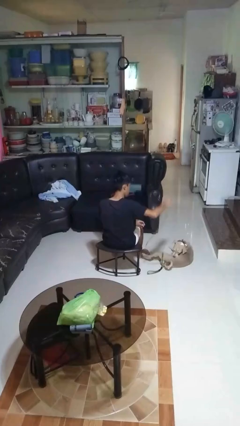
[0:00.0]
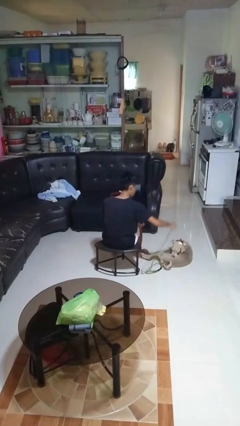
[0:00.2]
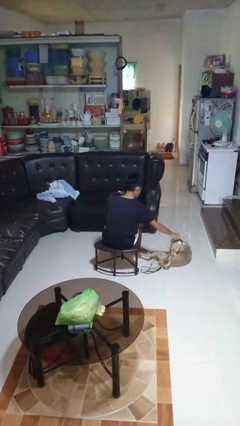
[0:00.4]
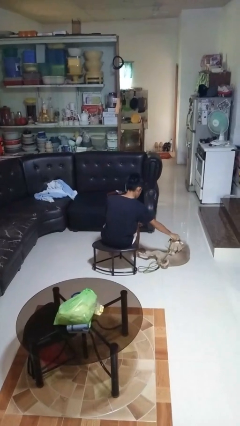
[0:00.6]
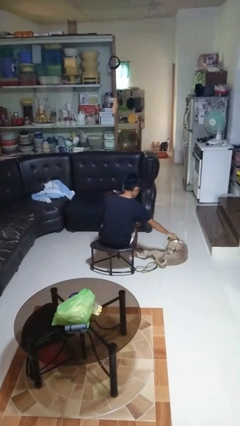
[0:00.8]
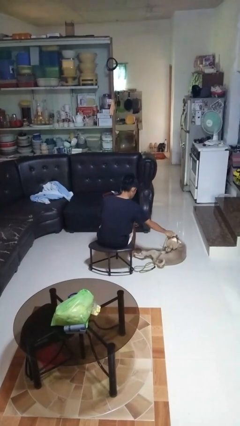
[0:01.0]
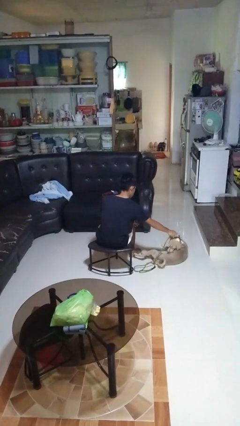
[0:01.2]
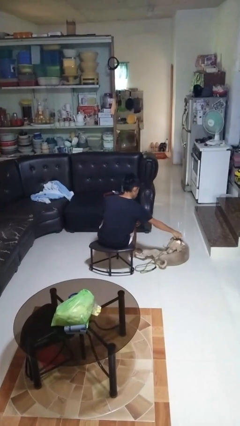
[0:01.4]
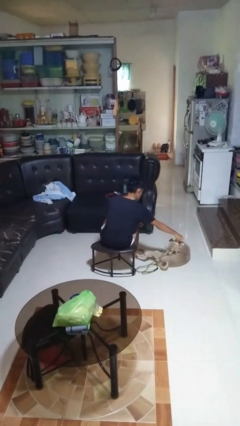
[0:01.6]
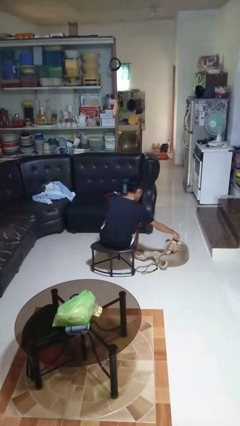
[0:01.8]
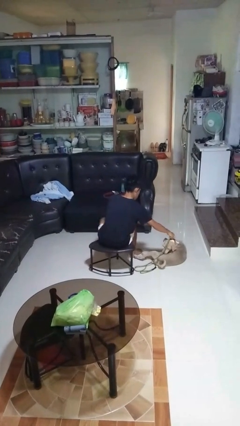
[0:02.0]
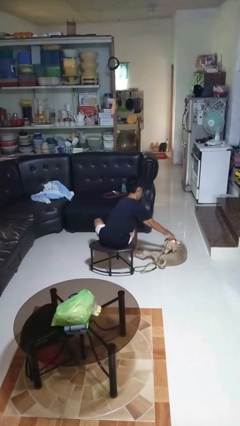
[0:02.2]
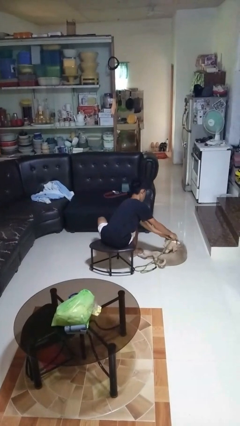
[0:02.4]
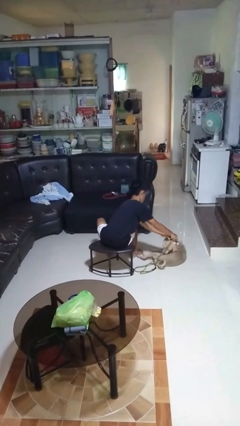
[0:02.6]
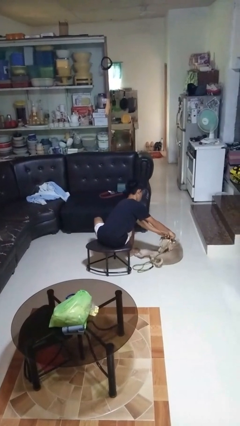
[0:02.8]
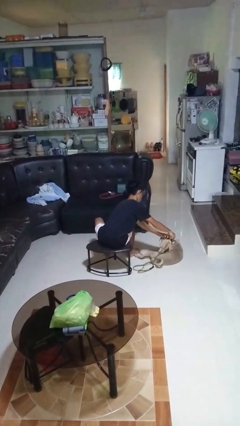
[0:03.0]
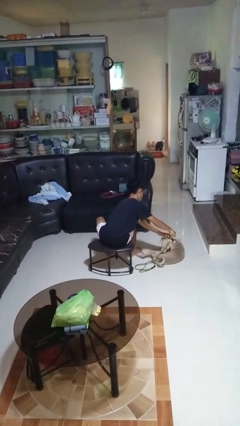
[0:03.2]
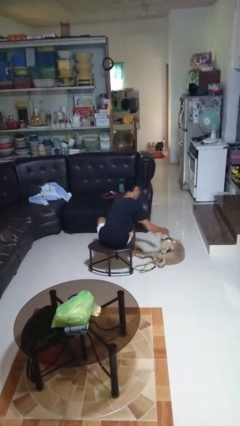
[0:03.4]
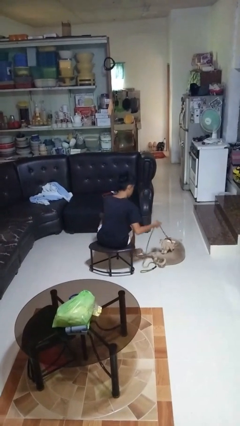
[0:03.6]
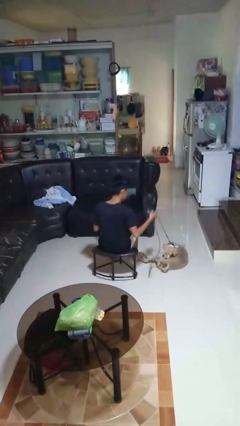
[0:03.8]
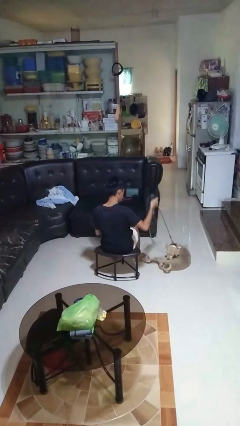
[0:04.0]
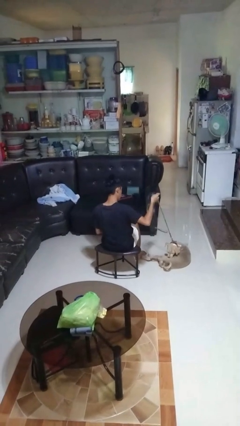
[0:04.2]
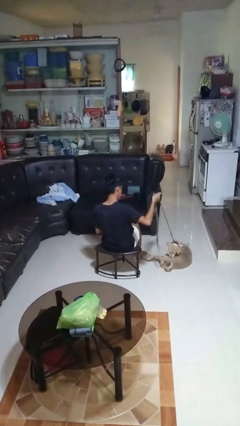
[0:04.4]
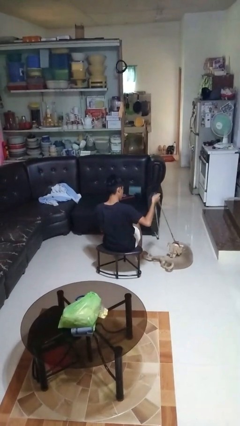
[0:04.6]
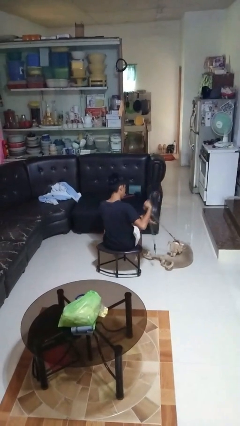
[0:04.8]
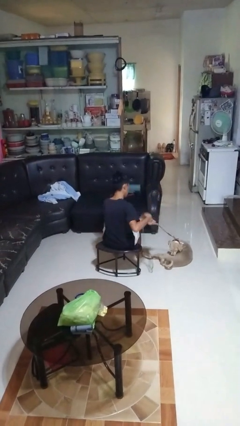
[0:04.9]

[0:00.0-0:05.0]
person attaches leash to dog

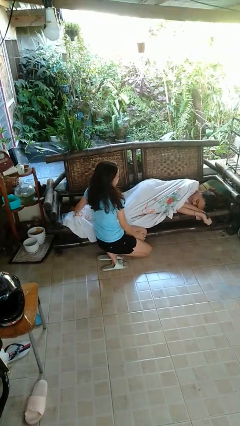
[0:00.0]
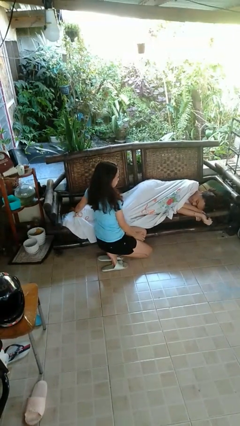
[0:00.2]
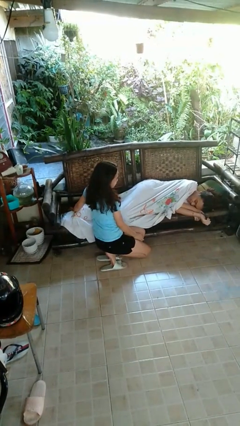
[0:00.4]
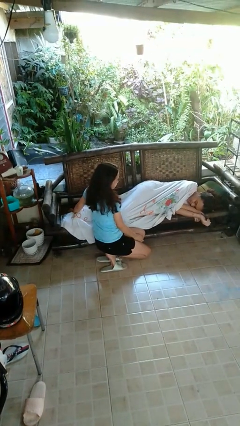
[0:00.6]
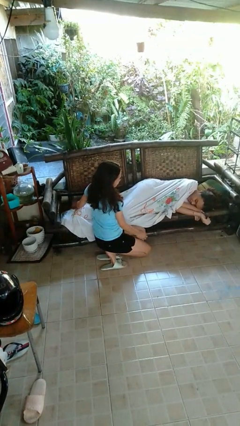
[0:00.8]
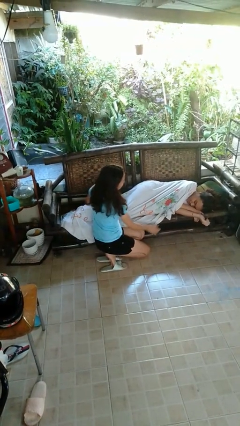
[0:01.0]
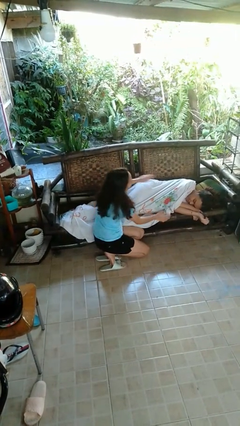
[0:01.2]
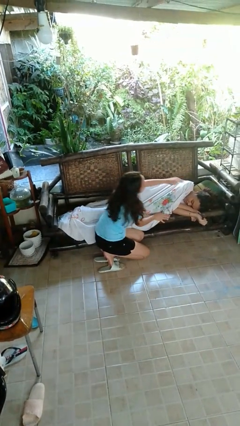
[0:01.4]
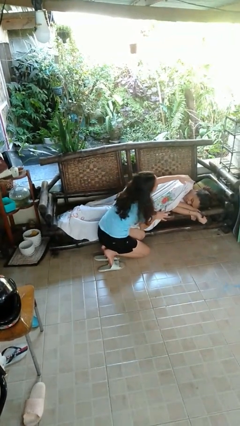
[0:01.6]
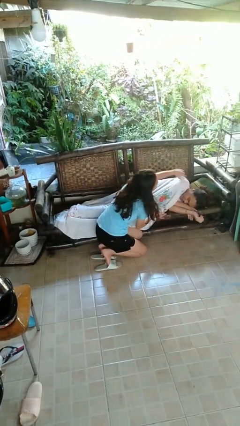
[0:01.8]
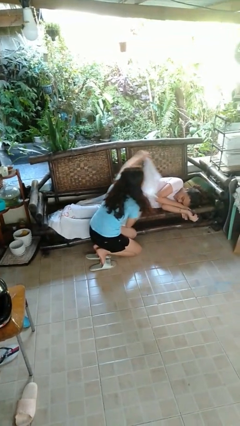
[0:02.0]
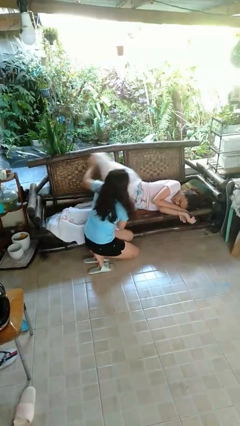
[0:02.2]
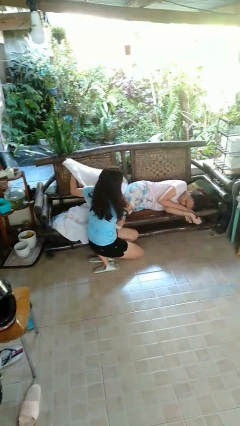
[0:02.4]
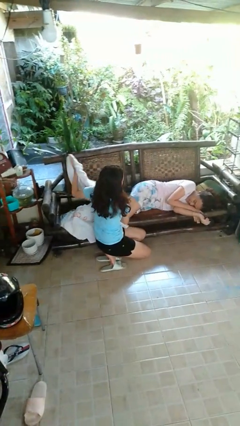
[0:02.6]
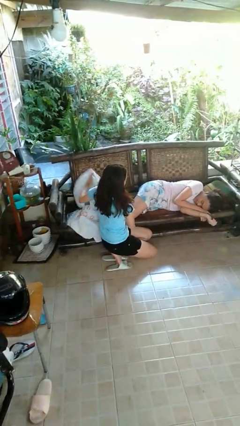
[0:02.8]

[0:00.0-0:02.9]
person uncovers friend with blanket

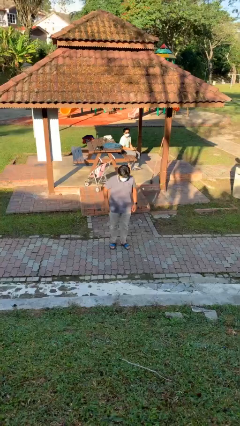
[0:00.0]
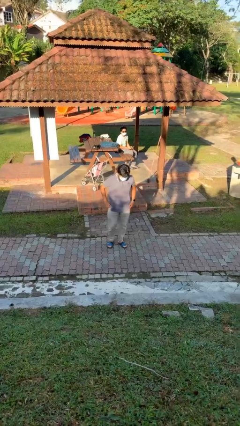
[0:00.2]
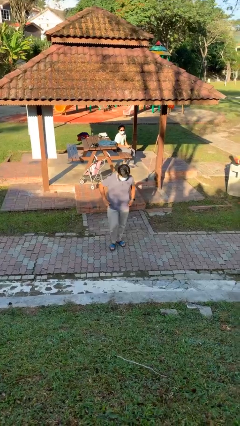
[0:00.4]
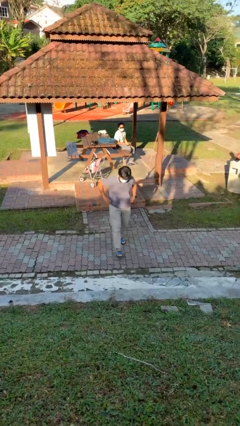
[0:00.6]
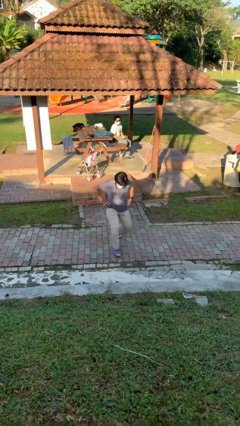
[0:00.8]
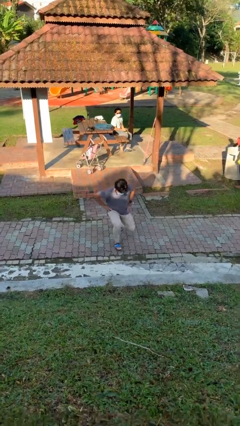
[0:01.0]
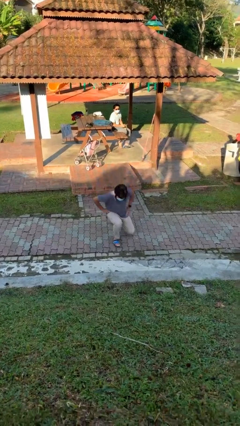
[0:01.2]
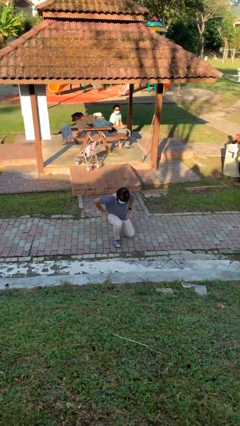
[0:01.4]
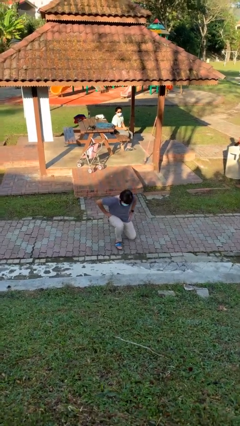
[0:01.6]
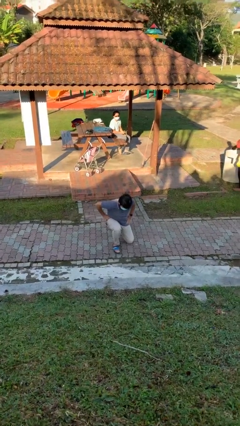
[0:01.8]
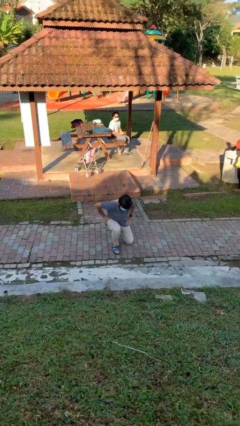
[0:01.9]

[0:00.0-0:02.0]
person kneels

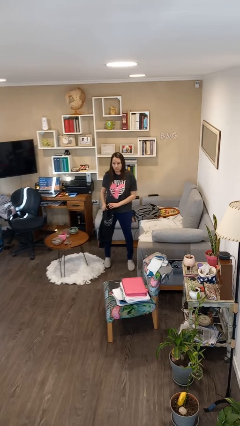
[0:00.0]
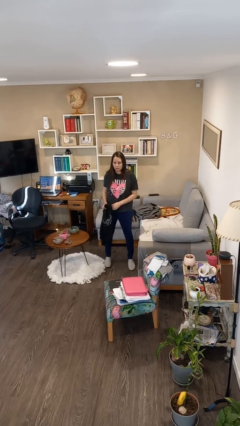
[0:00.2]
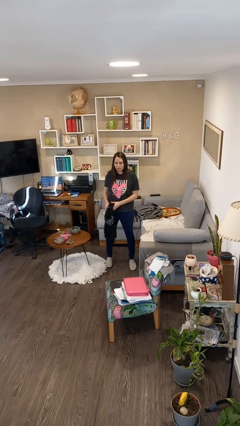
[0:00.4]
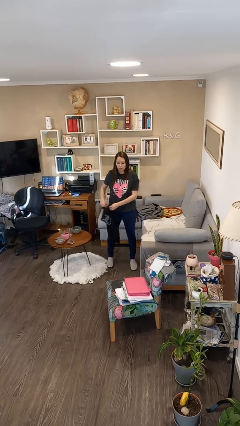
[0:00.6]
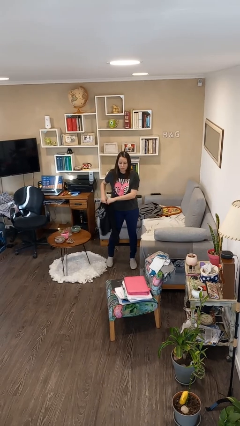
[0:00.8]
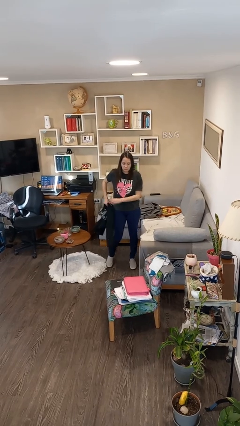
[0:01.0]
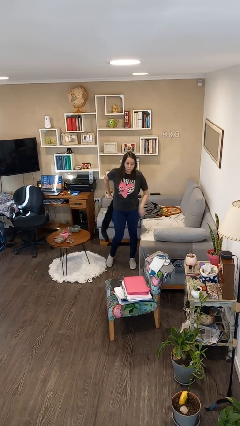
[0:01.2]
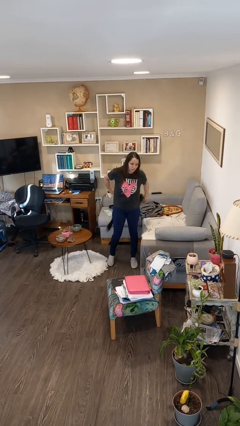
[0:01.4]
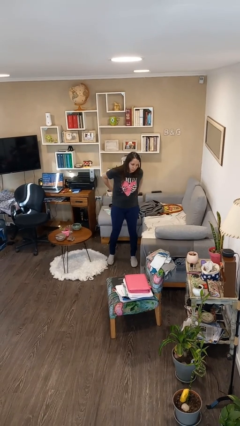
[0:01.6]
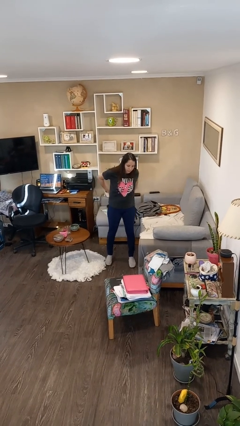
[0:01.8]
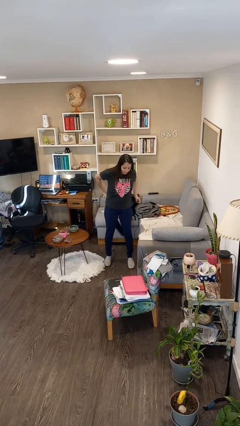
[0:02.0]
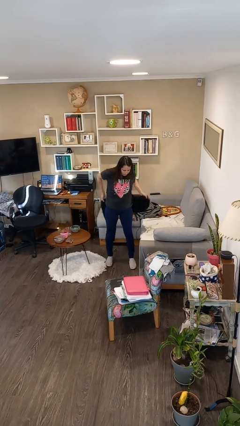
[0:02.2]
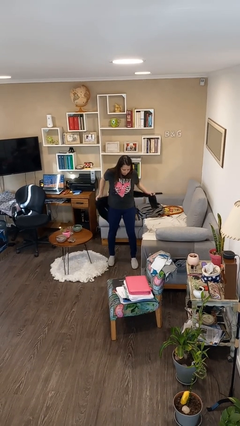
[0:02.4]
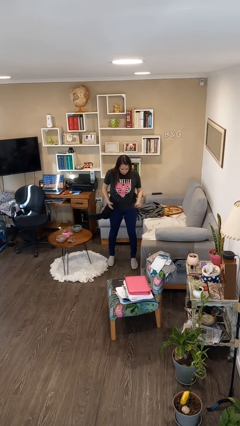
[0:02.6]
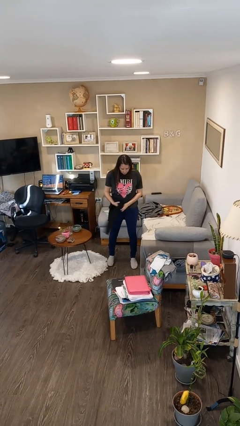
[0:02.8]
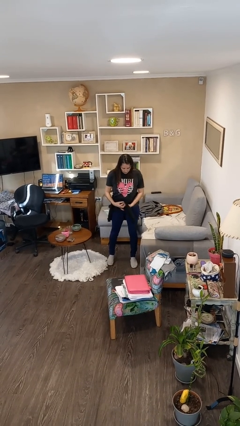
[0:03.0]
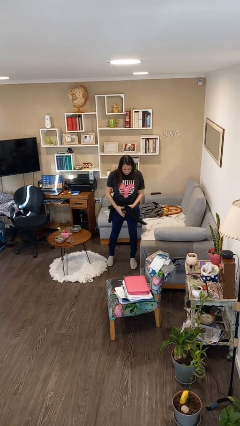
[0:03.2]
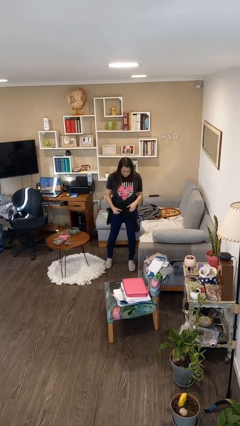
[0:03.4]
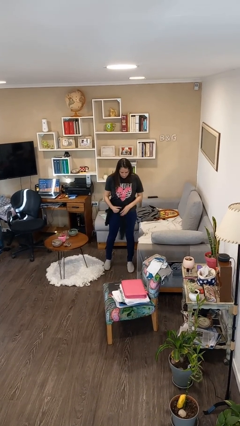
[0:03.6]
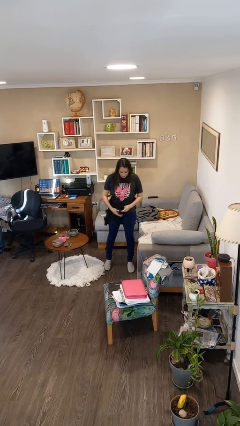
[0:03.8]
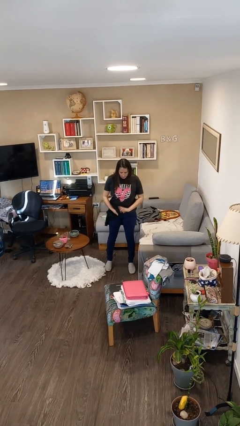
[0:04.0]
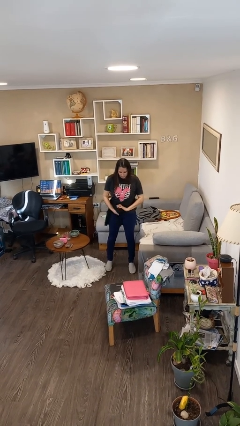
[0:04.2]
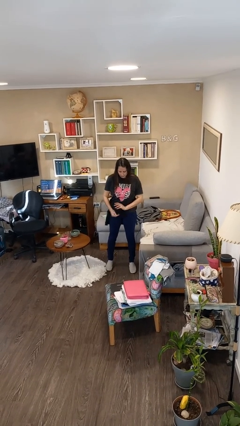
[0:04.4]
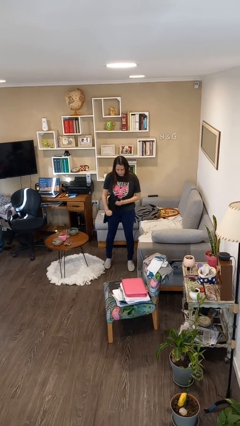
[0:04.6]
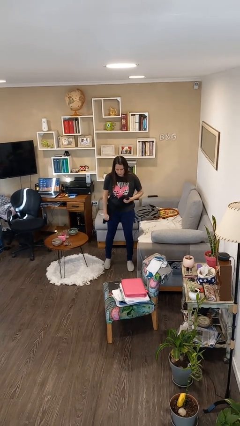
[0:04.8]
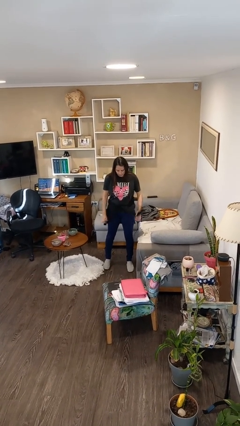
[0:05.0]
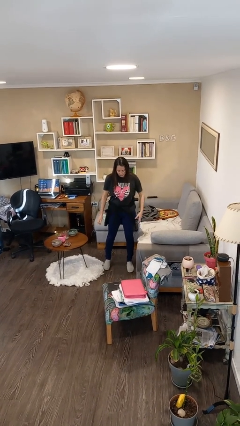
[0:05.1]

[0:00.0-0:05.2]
person ties jacket around waist

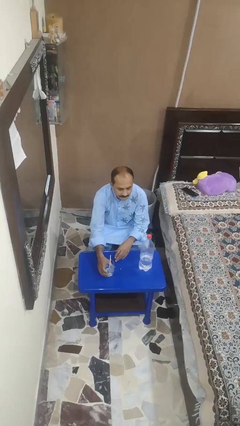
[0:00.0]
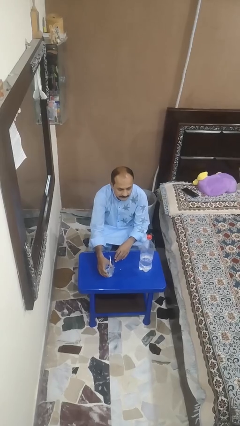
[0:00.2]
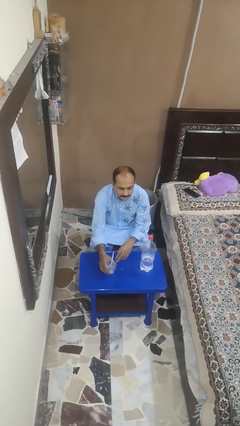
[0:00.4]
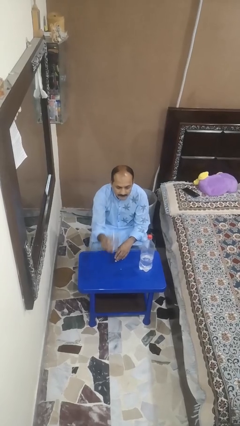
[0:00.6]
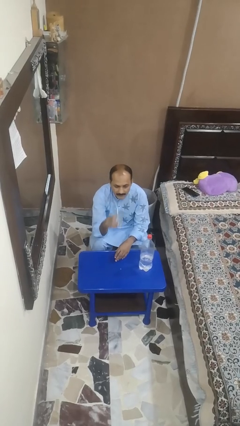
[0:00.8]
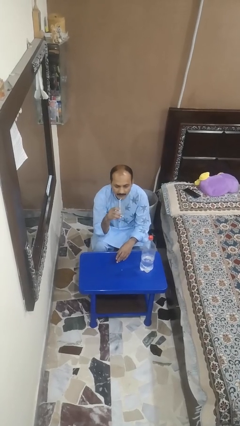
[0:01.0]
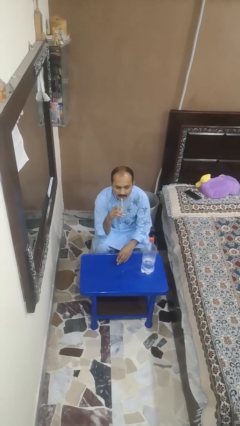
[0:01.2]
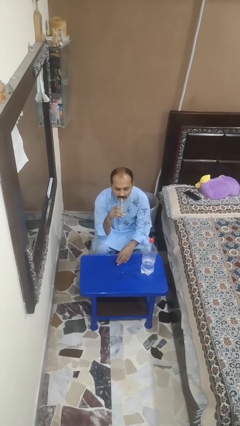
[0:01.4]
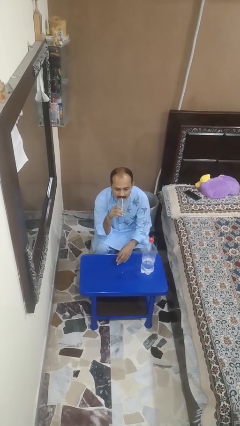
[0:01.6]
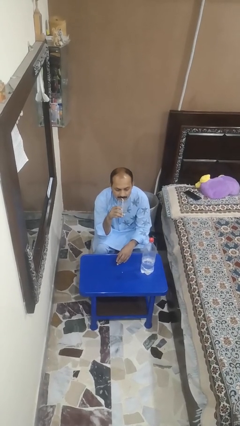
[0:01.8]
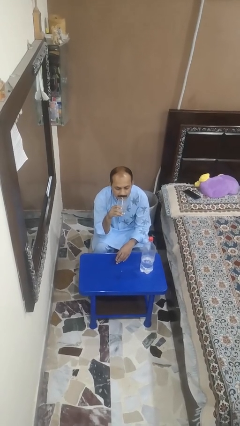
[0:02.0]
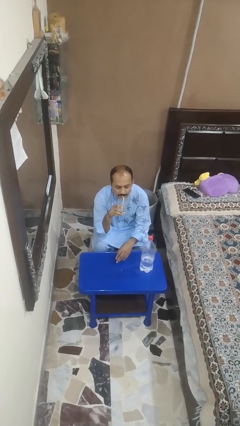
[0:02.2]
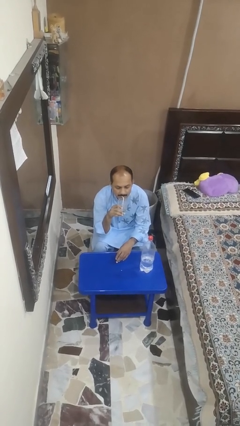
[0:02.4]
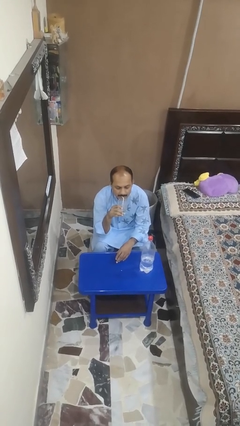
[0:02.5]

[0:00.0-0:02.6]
person drinks from straw
